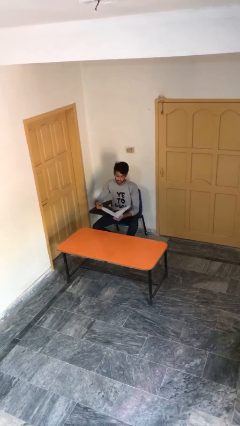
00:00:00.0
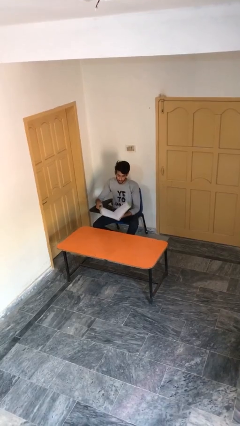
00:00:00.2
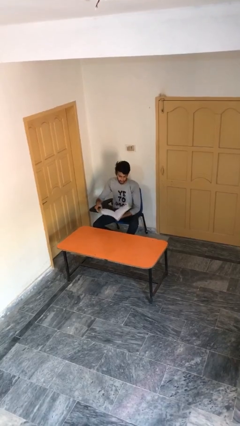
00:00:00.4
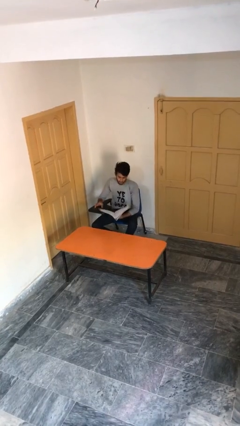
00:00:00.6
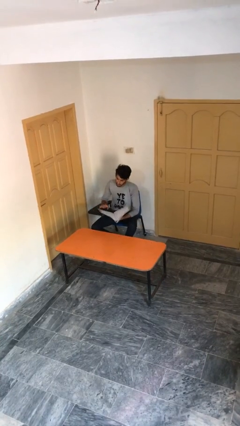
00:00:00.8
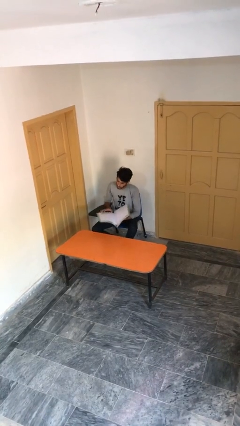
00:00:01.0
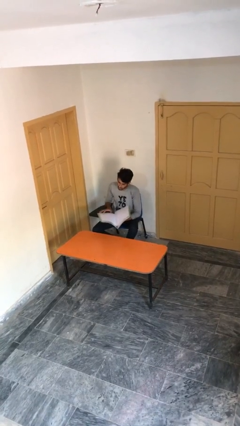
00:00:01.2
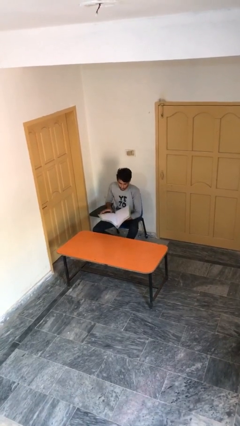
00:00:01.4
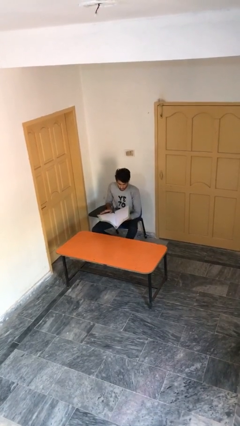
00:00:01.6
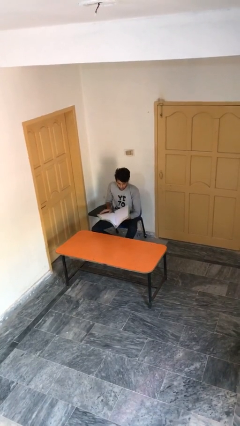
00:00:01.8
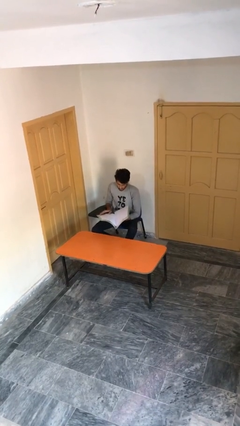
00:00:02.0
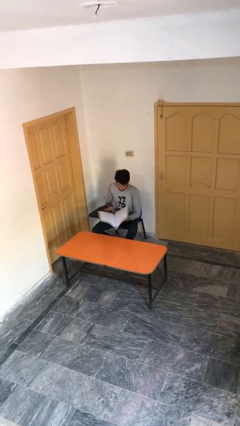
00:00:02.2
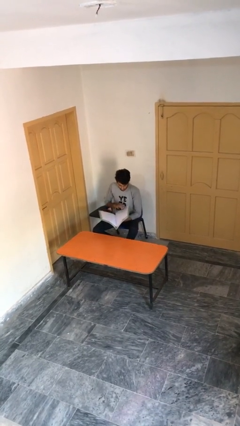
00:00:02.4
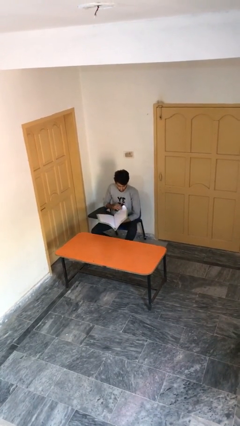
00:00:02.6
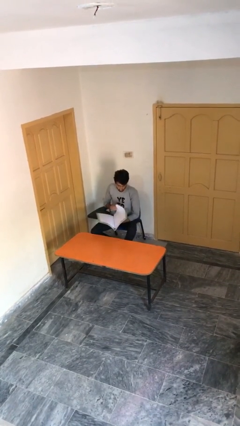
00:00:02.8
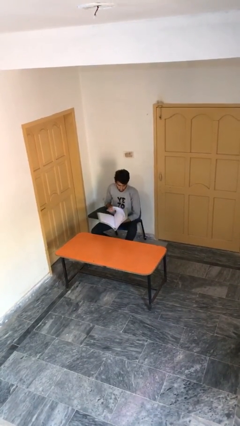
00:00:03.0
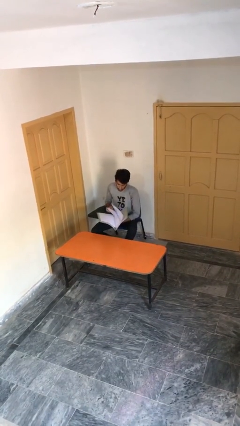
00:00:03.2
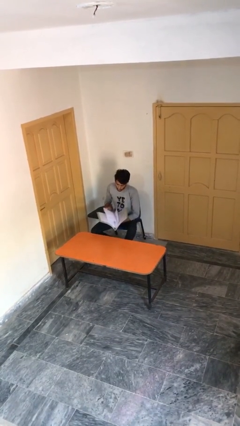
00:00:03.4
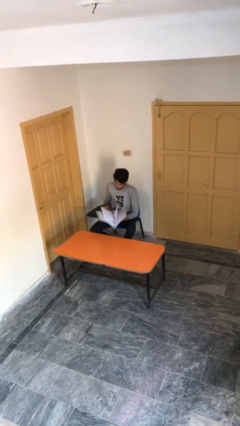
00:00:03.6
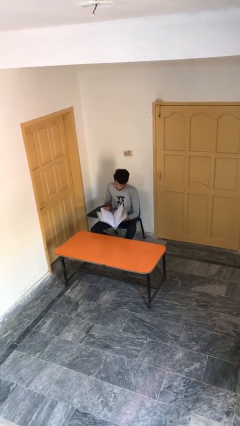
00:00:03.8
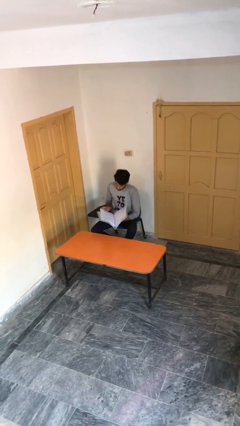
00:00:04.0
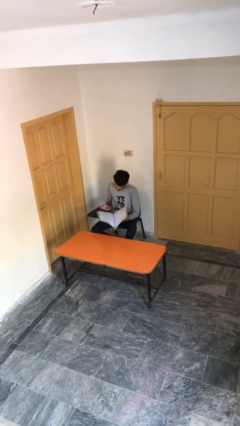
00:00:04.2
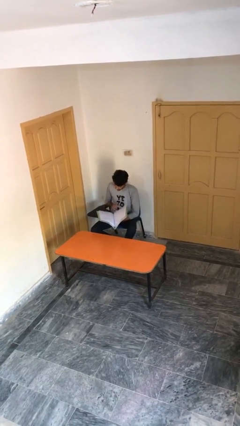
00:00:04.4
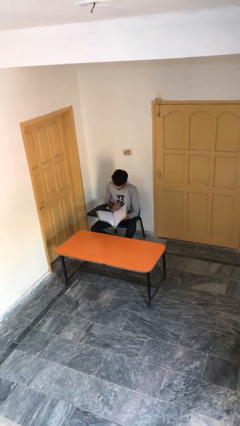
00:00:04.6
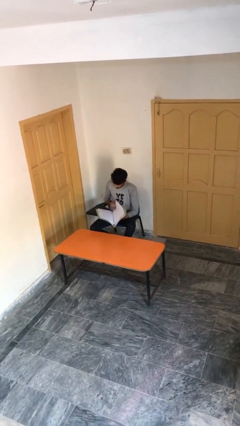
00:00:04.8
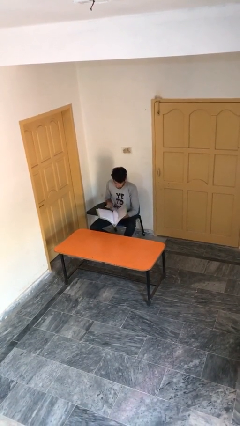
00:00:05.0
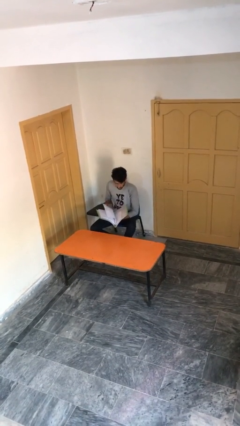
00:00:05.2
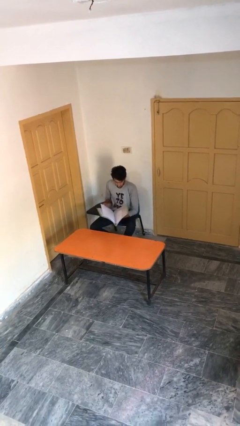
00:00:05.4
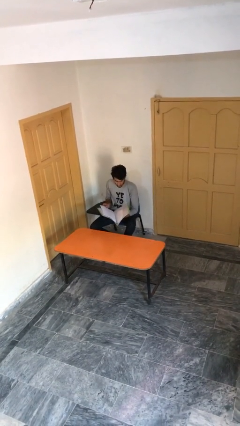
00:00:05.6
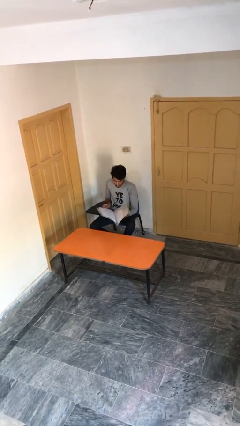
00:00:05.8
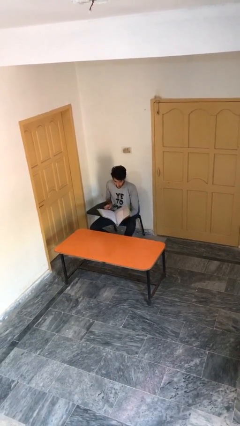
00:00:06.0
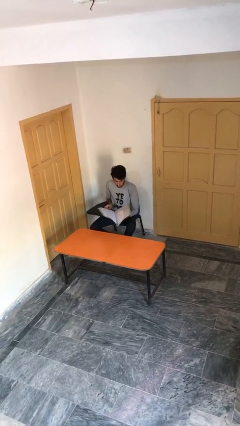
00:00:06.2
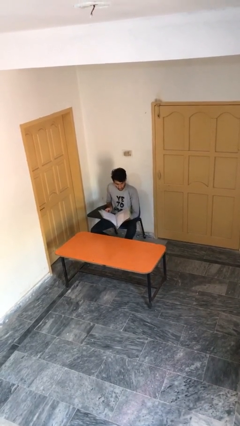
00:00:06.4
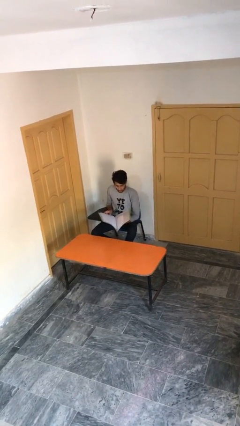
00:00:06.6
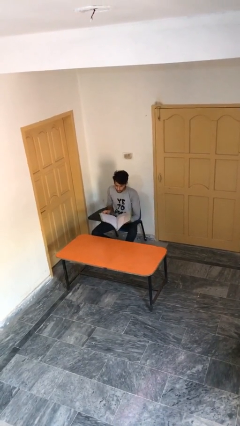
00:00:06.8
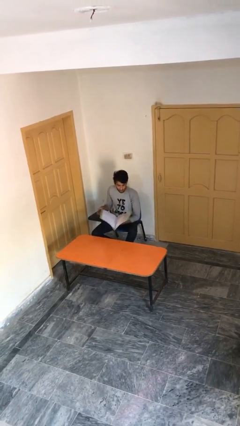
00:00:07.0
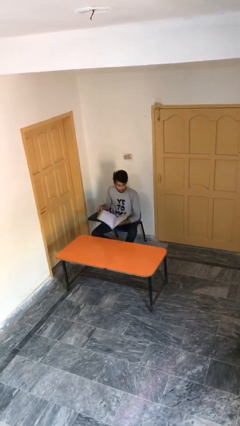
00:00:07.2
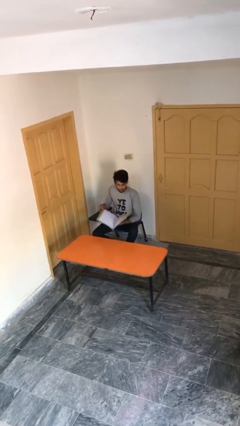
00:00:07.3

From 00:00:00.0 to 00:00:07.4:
person reads document

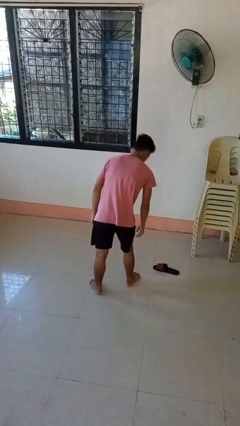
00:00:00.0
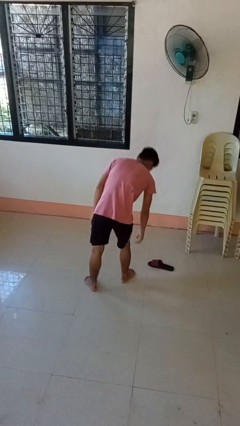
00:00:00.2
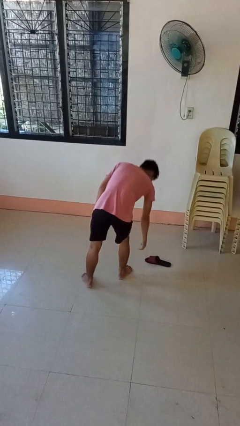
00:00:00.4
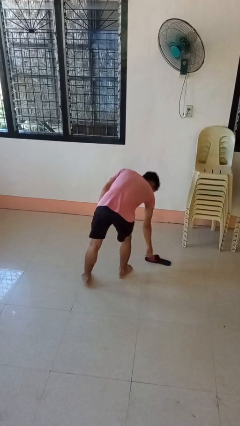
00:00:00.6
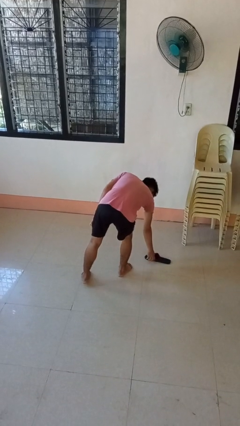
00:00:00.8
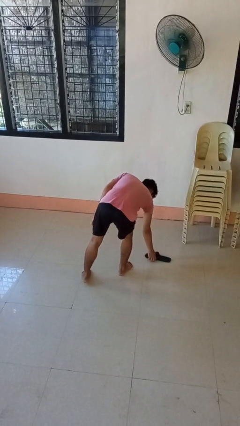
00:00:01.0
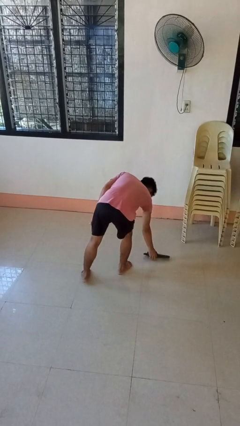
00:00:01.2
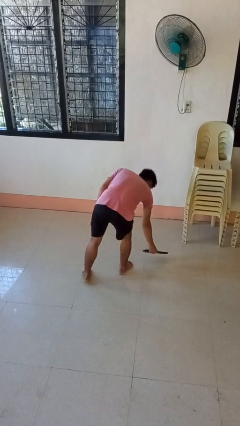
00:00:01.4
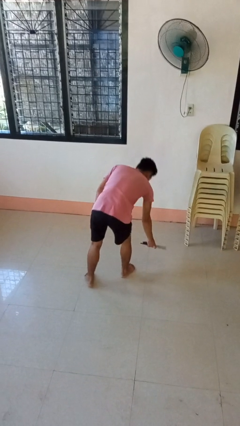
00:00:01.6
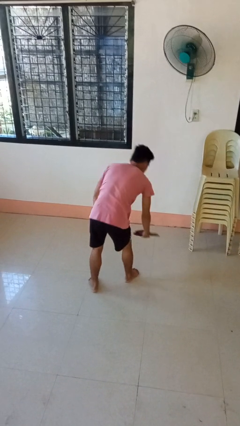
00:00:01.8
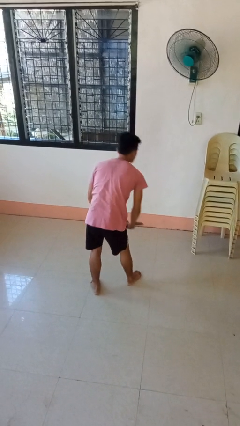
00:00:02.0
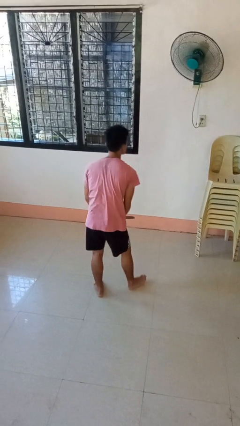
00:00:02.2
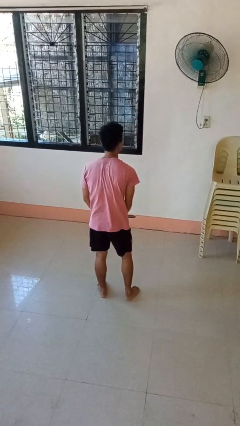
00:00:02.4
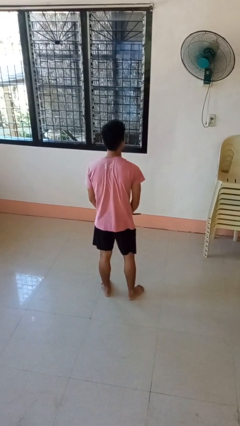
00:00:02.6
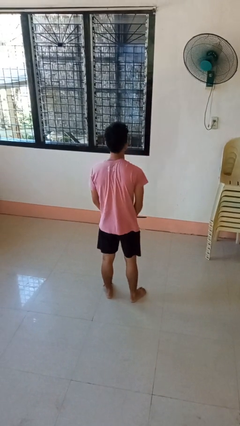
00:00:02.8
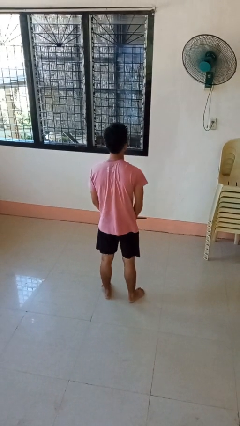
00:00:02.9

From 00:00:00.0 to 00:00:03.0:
person picks up object from floor

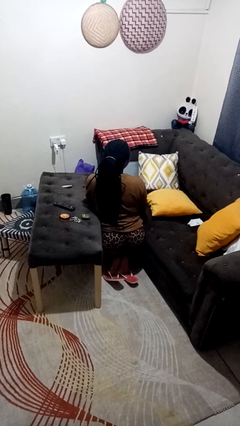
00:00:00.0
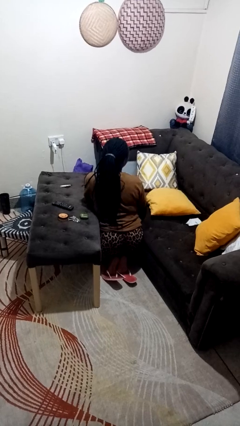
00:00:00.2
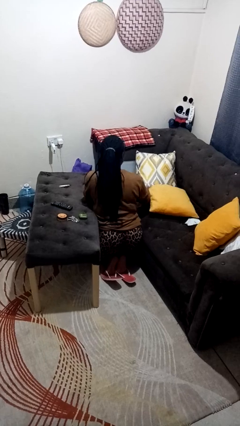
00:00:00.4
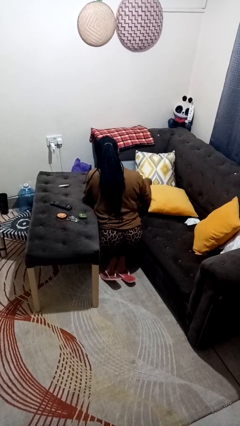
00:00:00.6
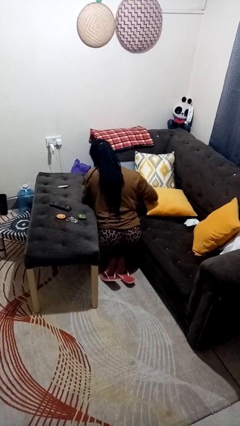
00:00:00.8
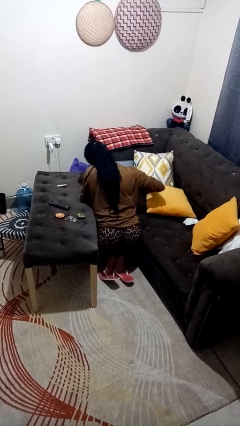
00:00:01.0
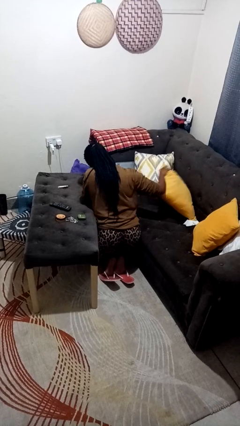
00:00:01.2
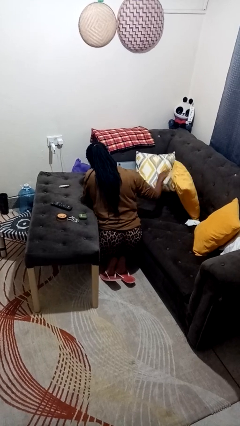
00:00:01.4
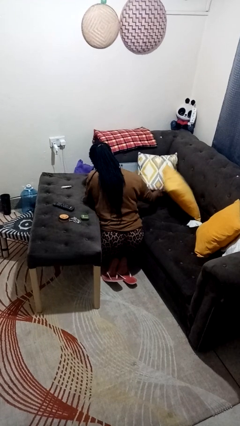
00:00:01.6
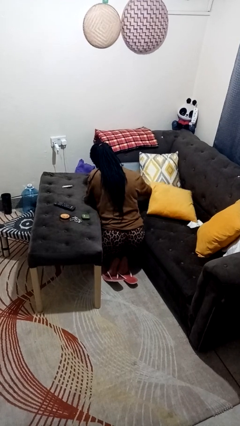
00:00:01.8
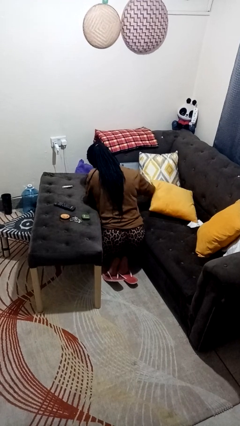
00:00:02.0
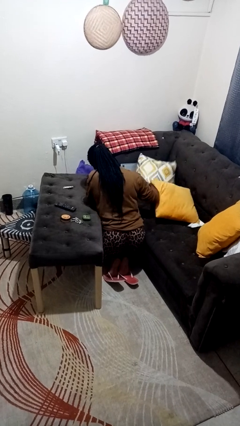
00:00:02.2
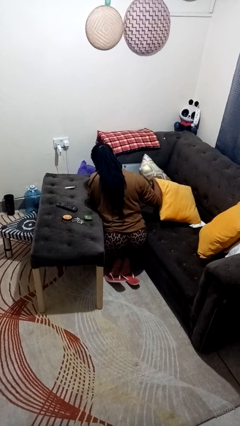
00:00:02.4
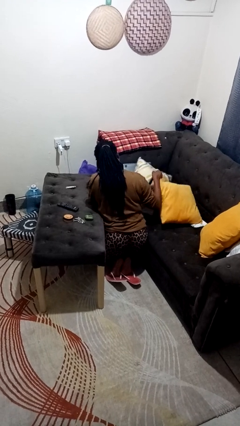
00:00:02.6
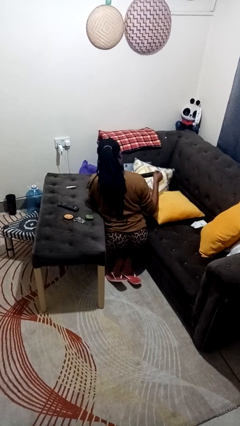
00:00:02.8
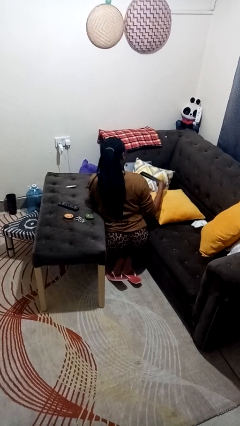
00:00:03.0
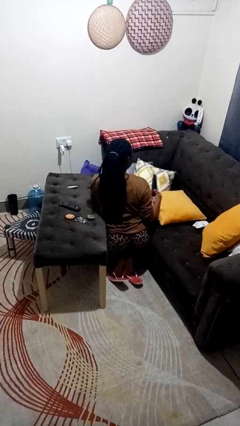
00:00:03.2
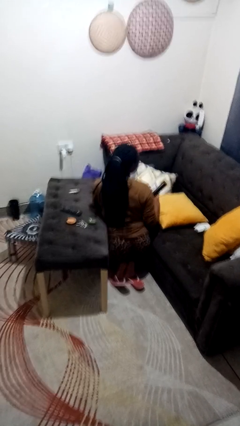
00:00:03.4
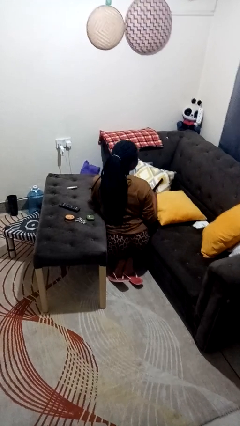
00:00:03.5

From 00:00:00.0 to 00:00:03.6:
person searches in couch

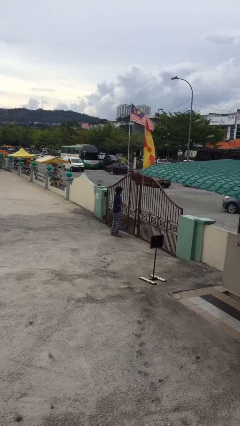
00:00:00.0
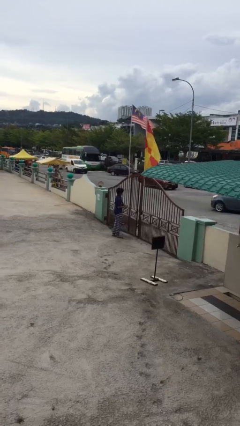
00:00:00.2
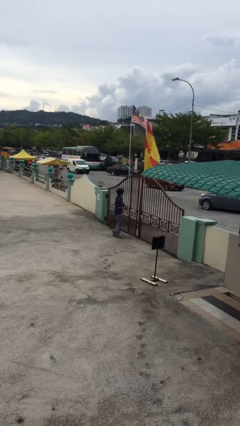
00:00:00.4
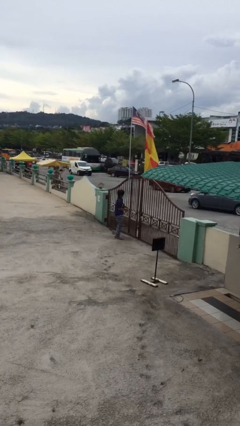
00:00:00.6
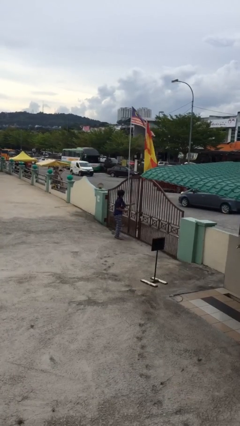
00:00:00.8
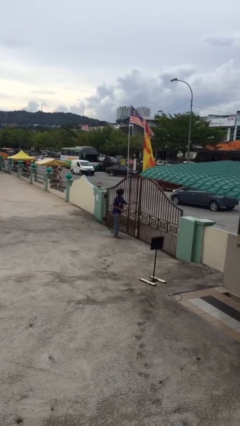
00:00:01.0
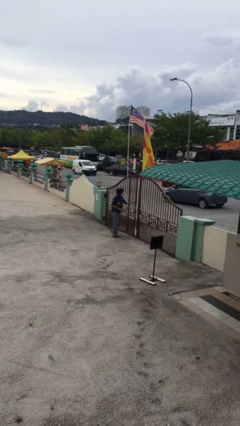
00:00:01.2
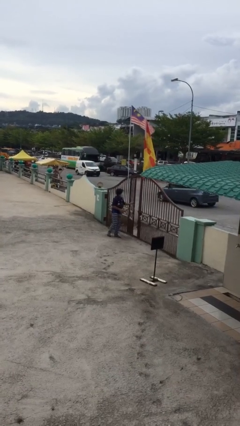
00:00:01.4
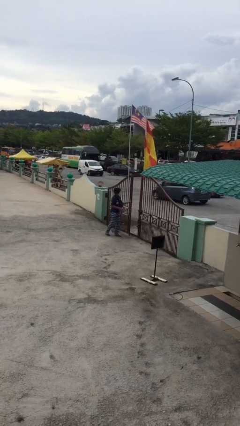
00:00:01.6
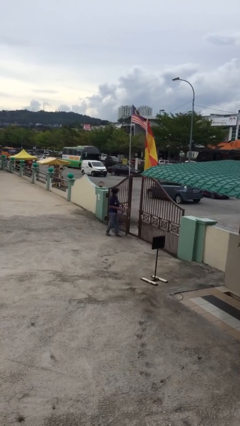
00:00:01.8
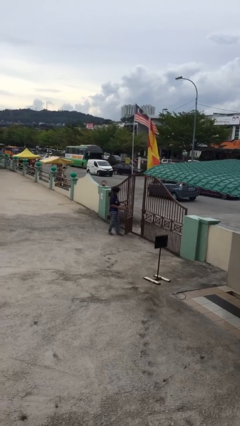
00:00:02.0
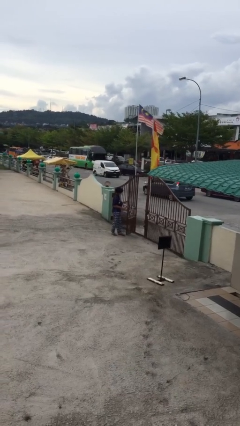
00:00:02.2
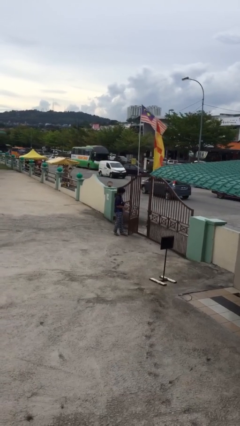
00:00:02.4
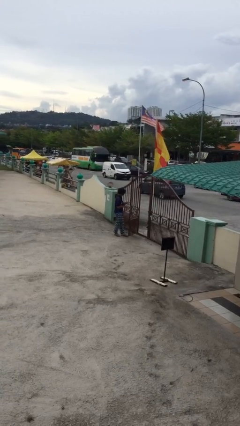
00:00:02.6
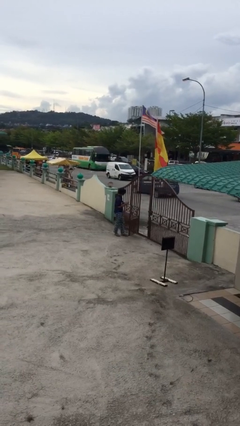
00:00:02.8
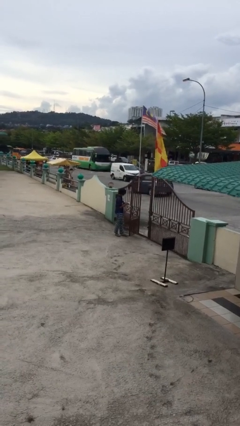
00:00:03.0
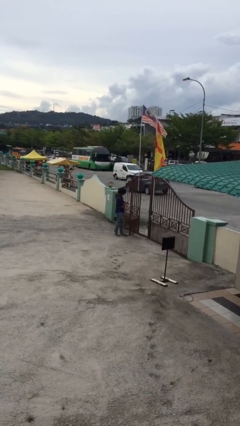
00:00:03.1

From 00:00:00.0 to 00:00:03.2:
person opens facility door

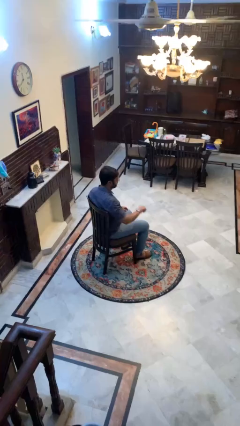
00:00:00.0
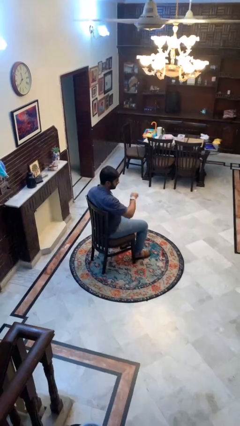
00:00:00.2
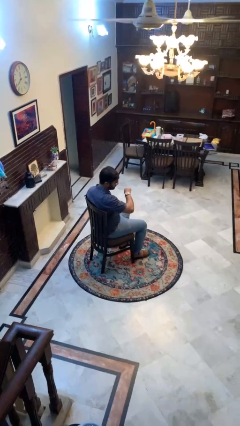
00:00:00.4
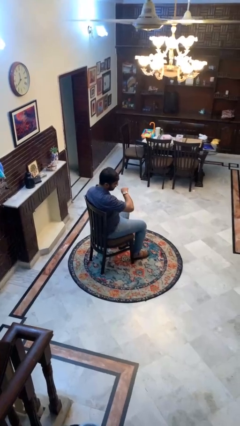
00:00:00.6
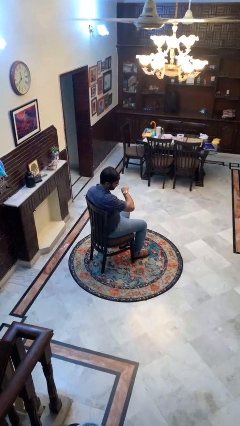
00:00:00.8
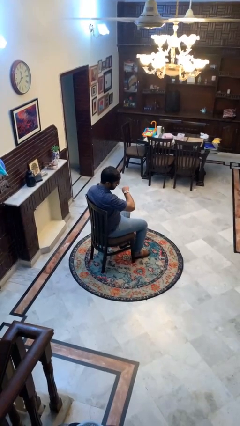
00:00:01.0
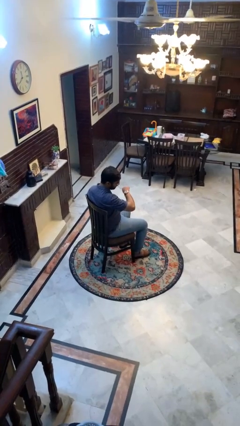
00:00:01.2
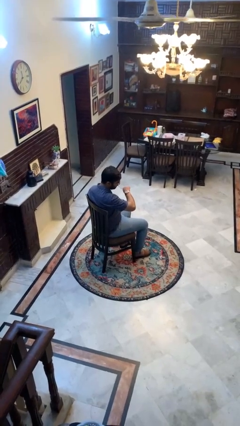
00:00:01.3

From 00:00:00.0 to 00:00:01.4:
person looks at wristwatch
